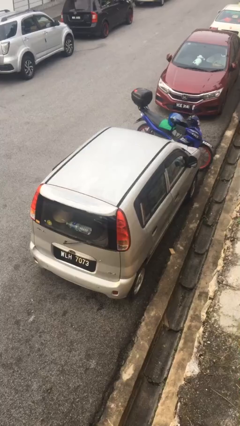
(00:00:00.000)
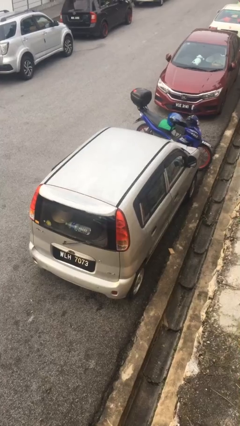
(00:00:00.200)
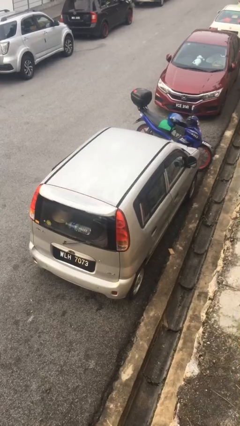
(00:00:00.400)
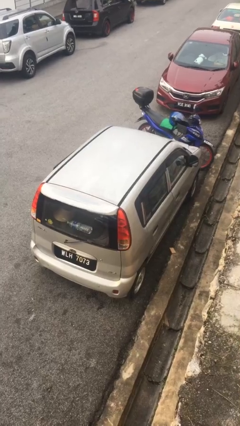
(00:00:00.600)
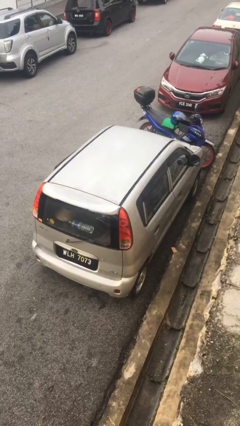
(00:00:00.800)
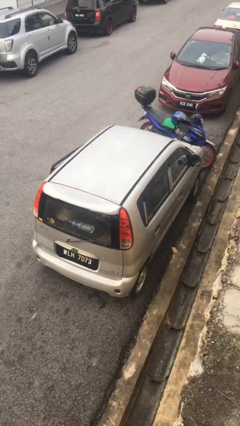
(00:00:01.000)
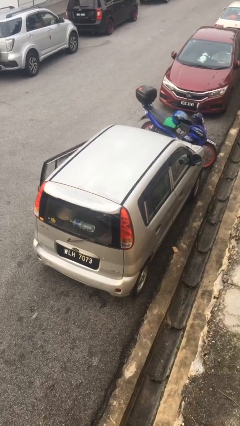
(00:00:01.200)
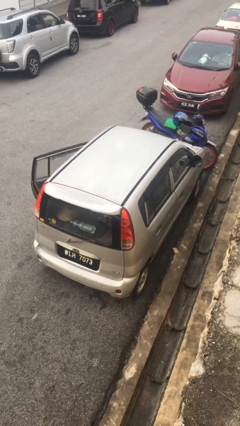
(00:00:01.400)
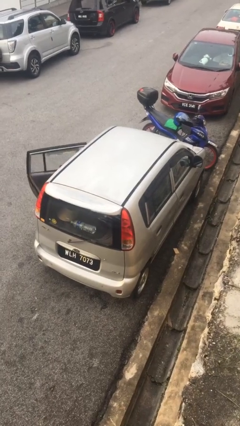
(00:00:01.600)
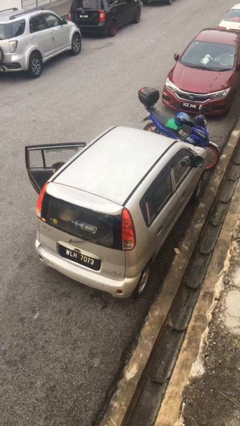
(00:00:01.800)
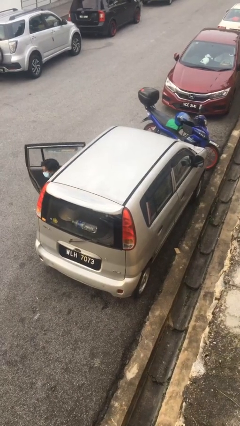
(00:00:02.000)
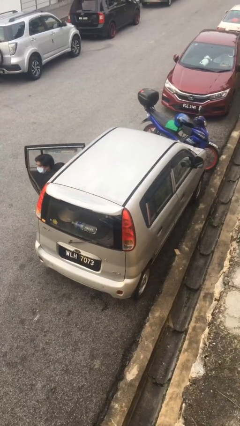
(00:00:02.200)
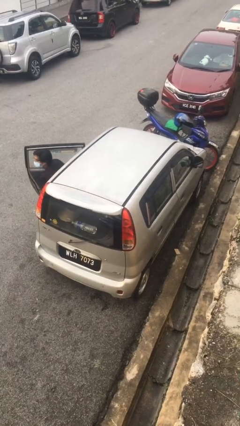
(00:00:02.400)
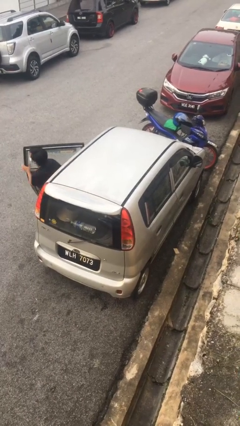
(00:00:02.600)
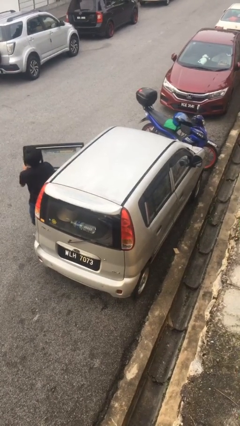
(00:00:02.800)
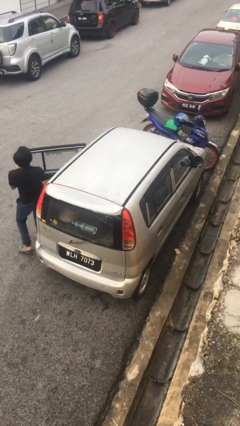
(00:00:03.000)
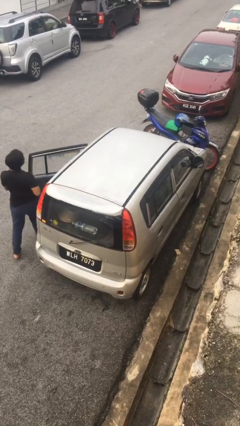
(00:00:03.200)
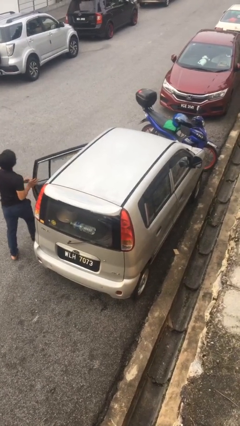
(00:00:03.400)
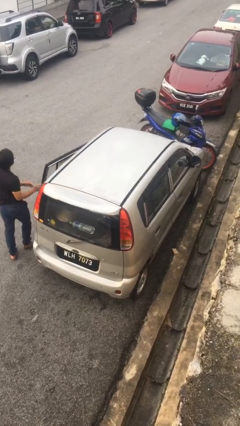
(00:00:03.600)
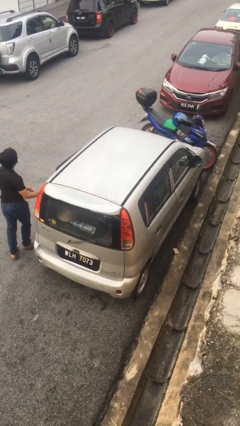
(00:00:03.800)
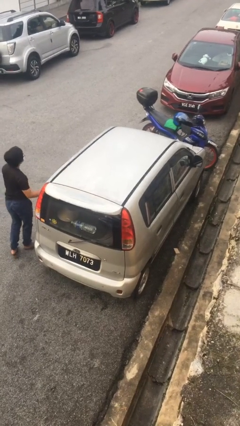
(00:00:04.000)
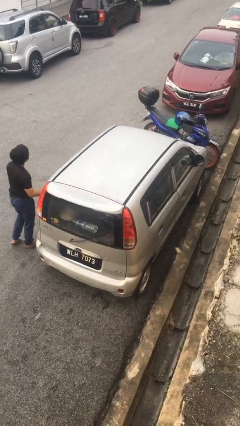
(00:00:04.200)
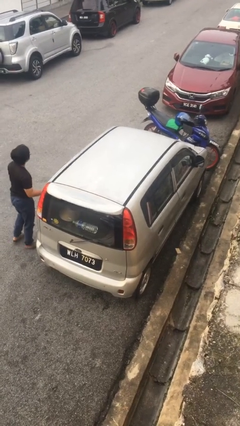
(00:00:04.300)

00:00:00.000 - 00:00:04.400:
car drops off person

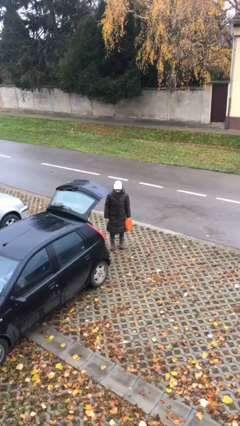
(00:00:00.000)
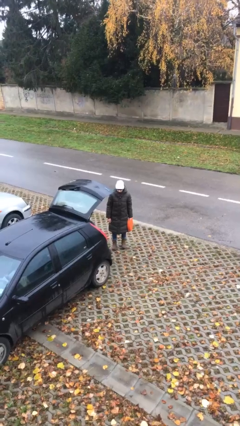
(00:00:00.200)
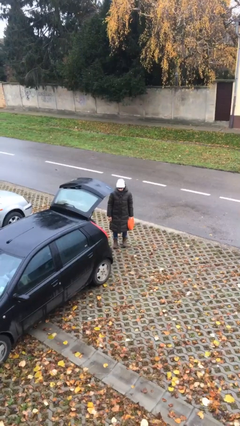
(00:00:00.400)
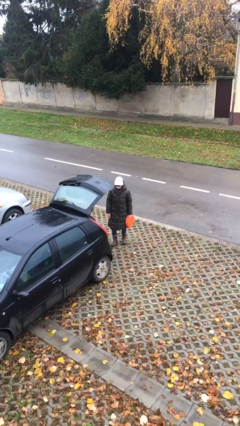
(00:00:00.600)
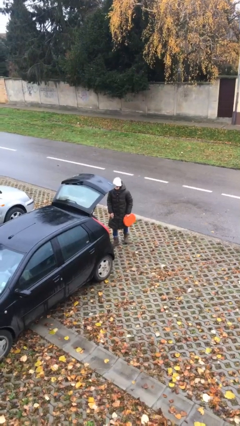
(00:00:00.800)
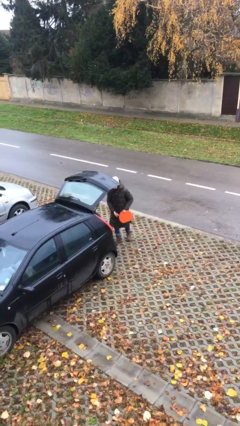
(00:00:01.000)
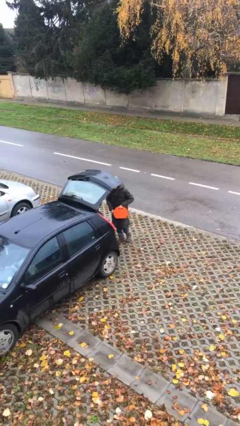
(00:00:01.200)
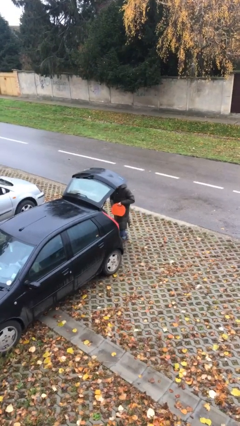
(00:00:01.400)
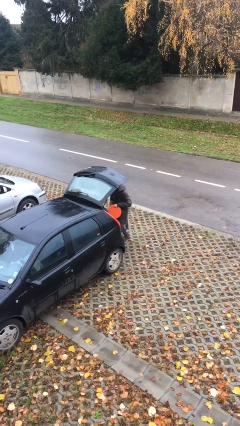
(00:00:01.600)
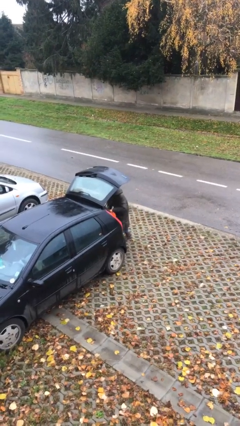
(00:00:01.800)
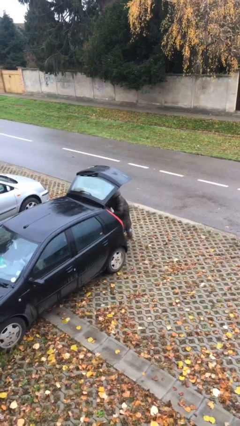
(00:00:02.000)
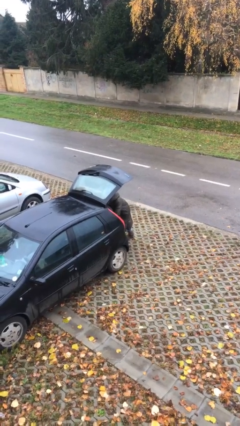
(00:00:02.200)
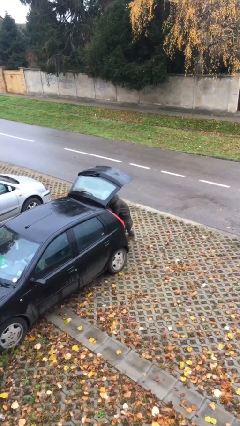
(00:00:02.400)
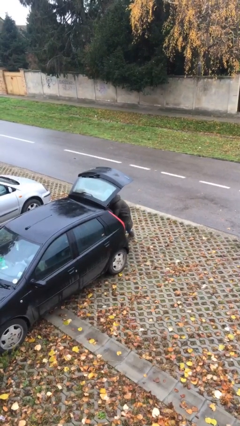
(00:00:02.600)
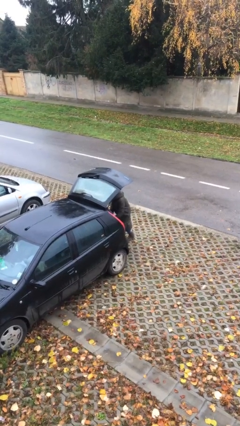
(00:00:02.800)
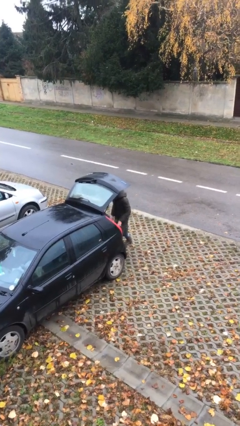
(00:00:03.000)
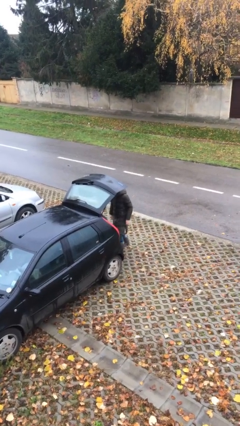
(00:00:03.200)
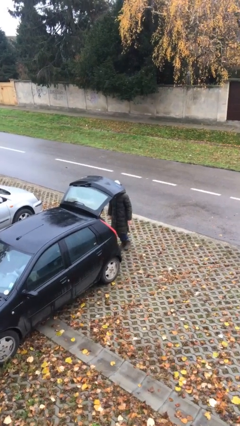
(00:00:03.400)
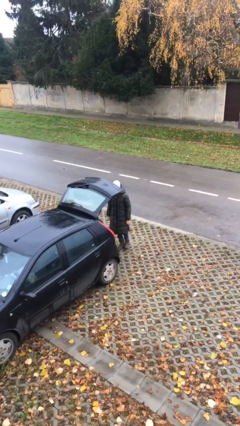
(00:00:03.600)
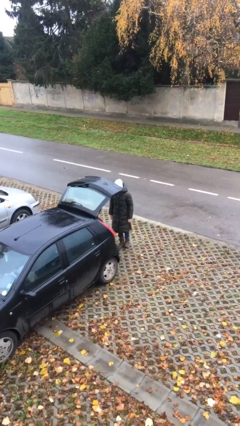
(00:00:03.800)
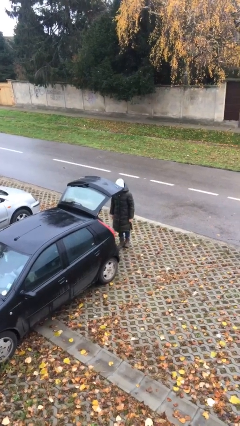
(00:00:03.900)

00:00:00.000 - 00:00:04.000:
person loads car

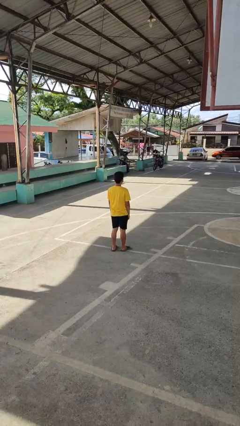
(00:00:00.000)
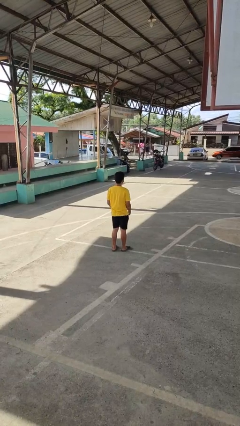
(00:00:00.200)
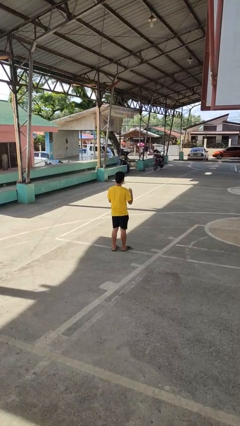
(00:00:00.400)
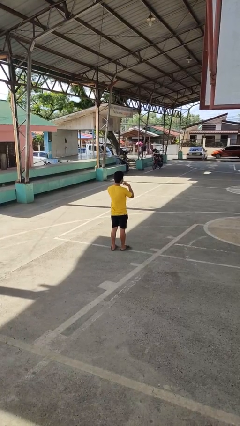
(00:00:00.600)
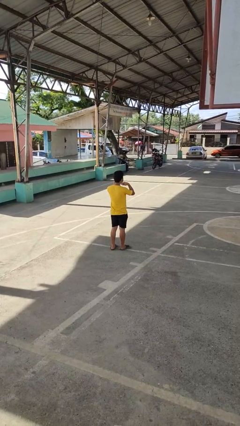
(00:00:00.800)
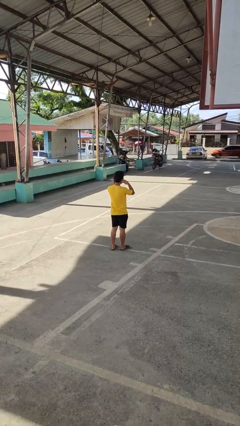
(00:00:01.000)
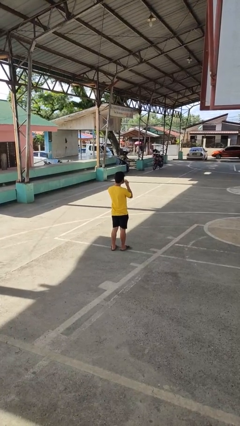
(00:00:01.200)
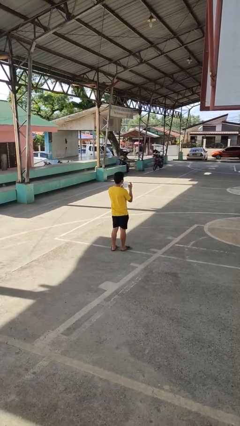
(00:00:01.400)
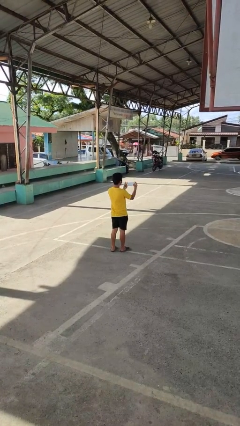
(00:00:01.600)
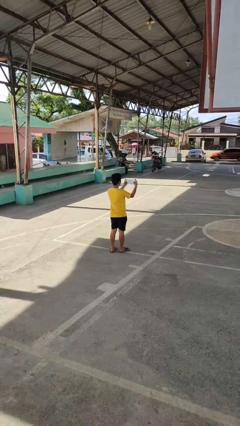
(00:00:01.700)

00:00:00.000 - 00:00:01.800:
person takes off facemask

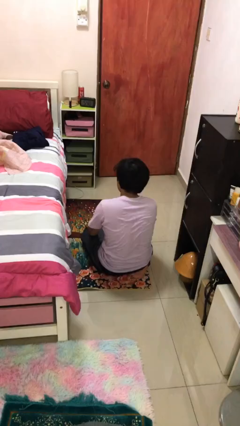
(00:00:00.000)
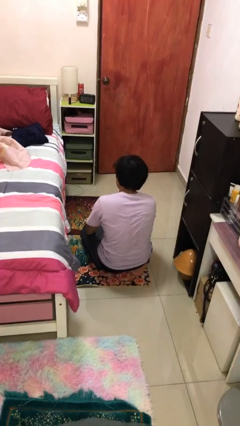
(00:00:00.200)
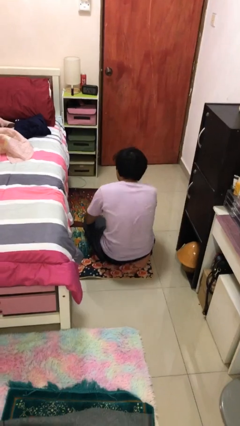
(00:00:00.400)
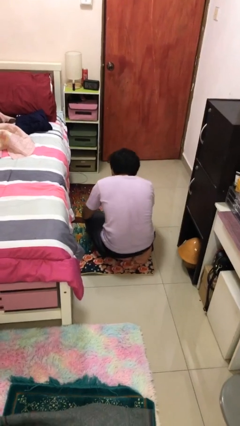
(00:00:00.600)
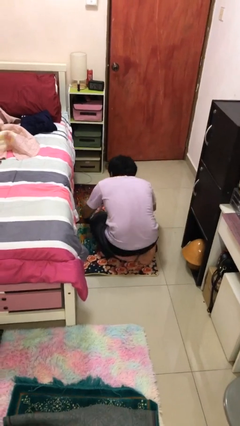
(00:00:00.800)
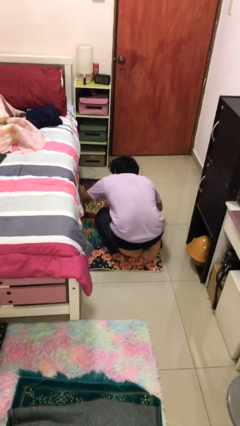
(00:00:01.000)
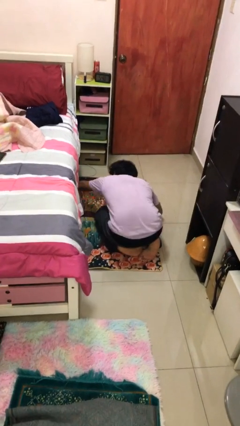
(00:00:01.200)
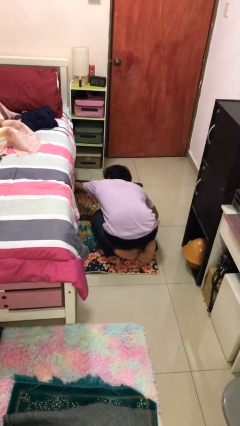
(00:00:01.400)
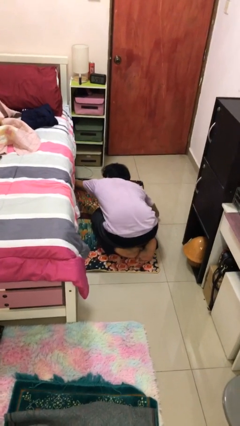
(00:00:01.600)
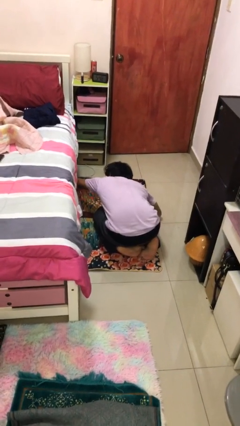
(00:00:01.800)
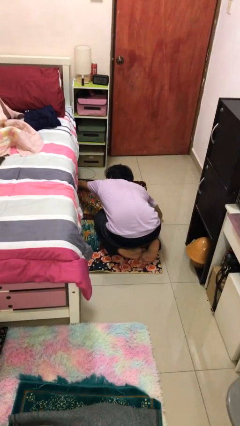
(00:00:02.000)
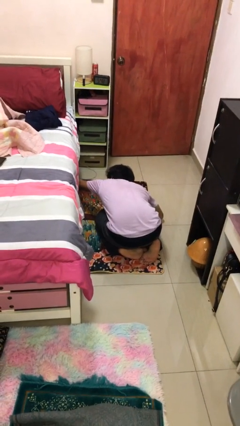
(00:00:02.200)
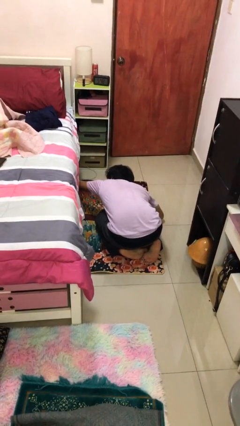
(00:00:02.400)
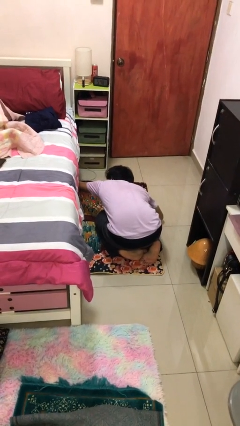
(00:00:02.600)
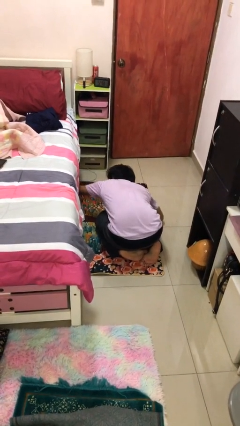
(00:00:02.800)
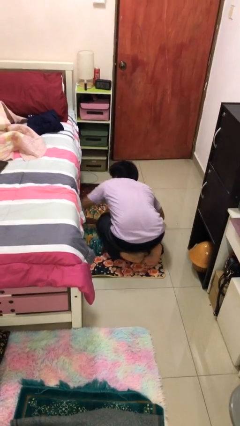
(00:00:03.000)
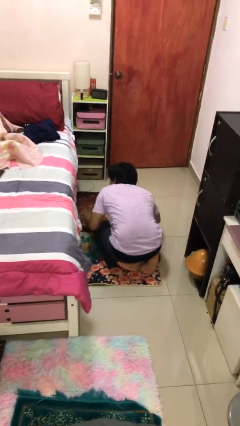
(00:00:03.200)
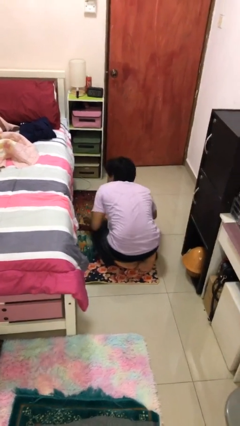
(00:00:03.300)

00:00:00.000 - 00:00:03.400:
person searches under bed

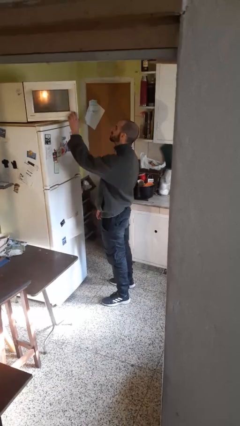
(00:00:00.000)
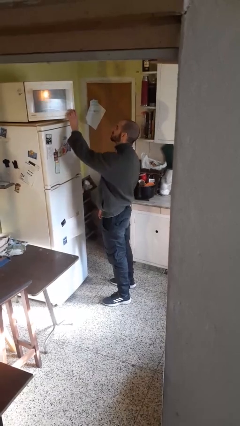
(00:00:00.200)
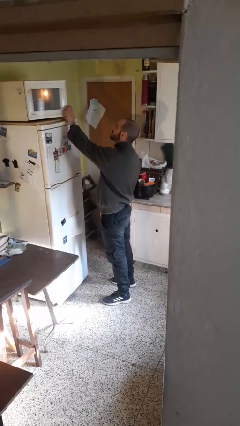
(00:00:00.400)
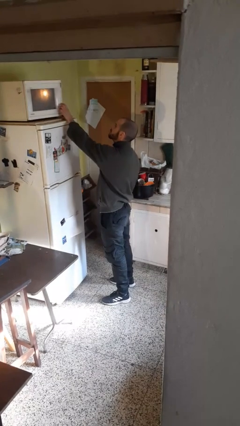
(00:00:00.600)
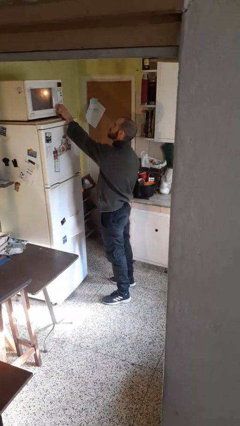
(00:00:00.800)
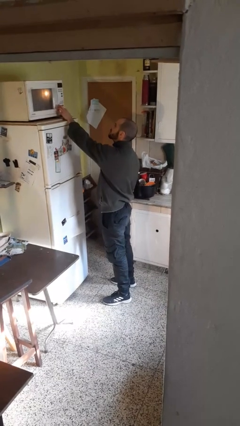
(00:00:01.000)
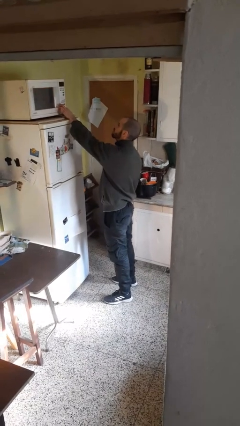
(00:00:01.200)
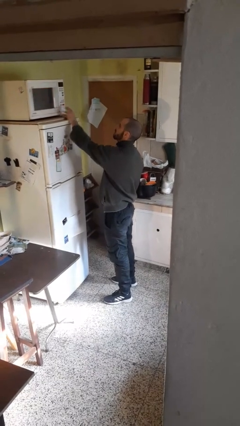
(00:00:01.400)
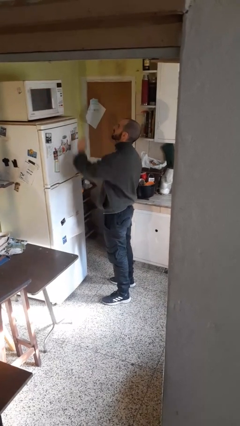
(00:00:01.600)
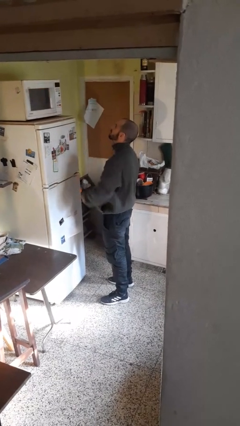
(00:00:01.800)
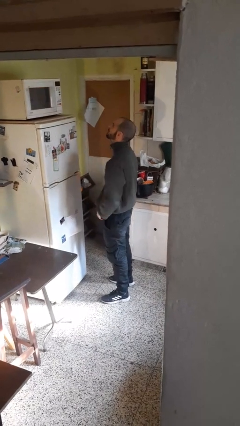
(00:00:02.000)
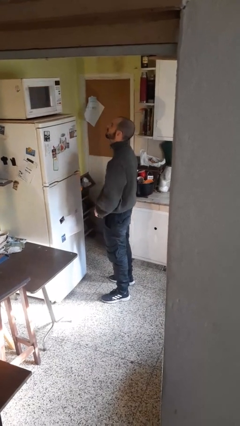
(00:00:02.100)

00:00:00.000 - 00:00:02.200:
person closes microwave

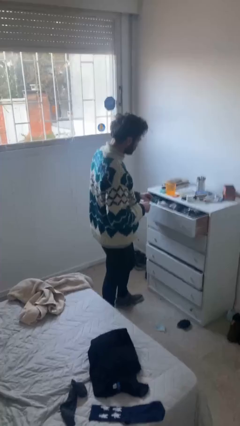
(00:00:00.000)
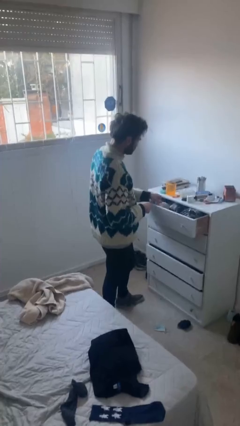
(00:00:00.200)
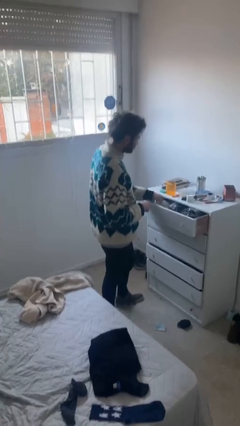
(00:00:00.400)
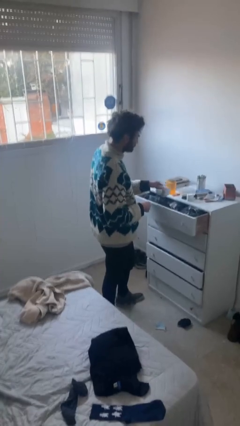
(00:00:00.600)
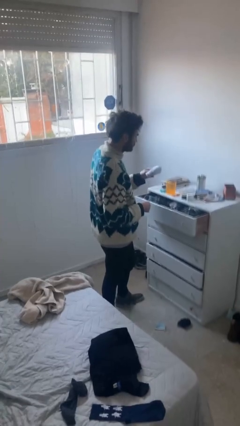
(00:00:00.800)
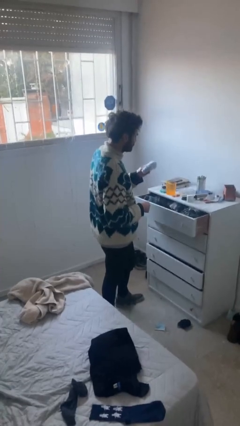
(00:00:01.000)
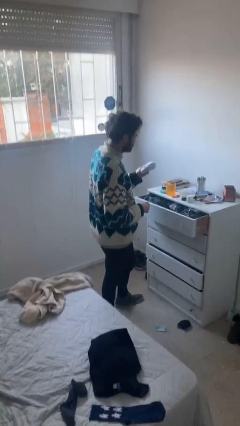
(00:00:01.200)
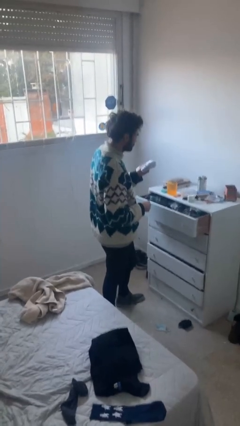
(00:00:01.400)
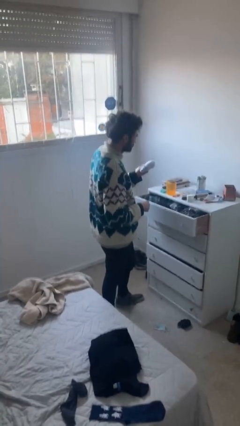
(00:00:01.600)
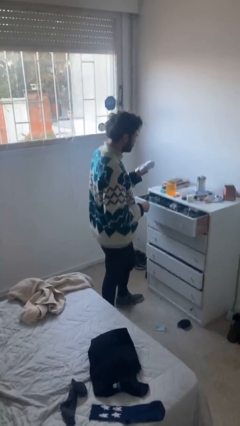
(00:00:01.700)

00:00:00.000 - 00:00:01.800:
person takes clothes from dresser
